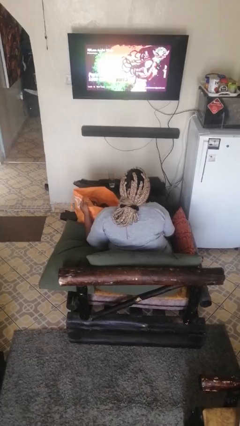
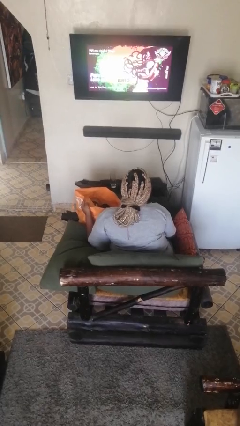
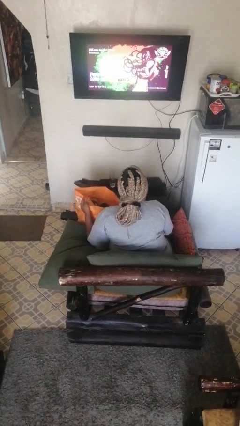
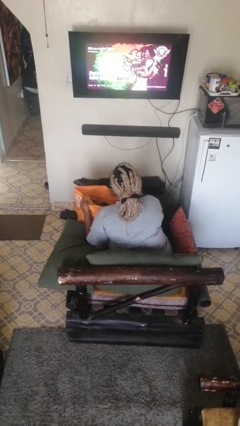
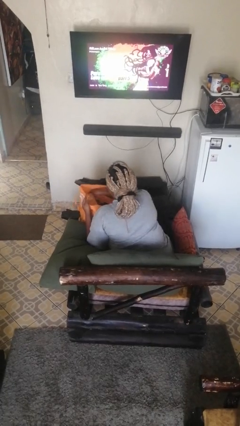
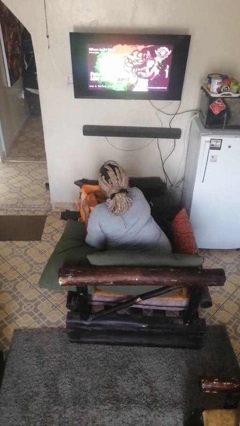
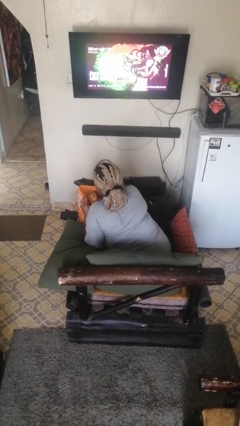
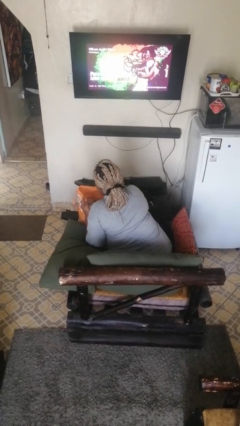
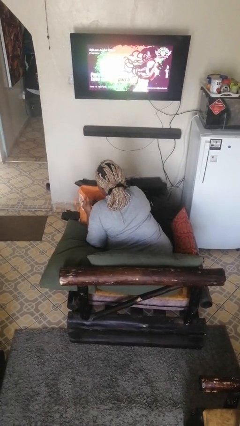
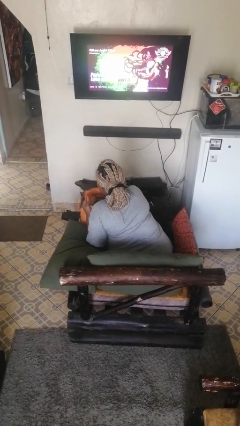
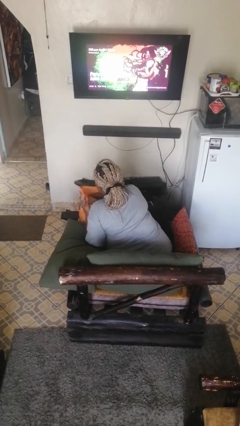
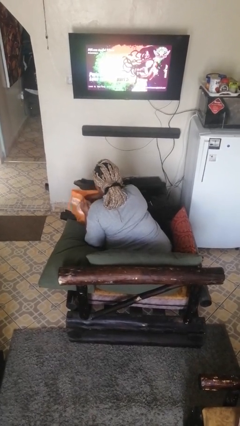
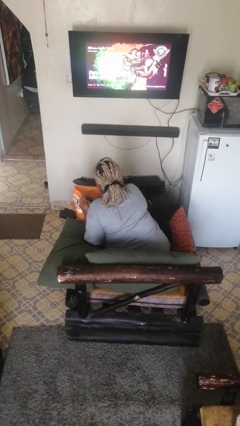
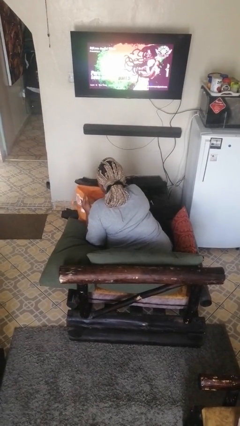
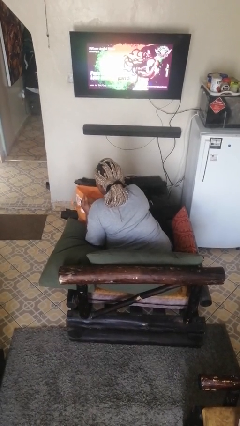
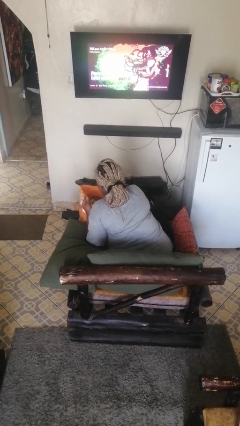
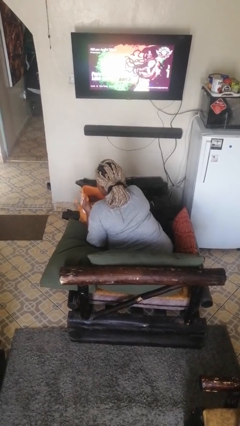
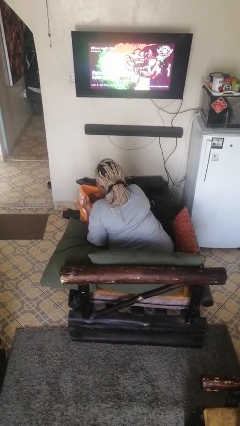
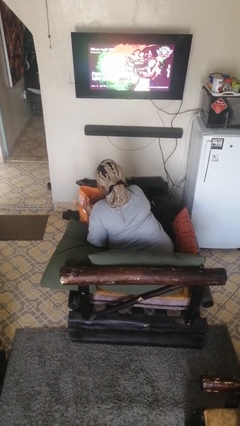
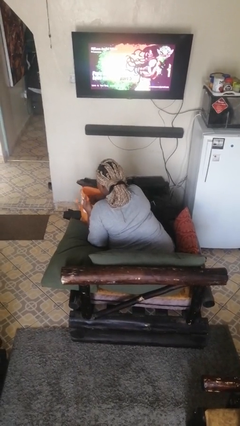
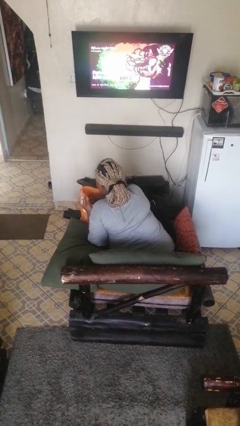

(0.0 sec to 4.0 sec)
person searches in bag

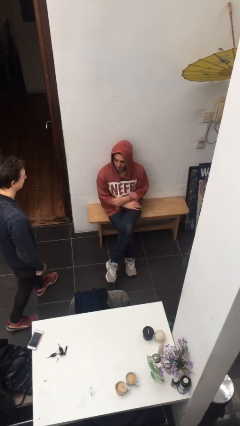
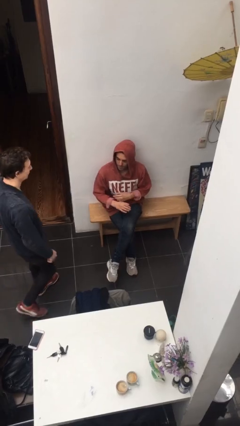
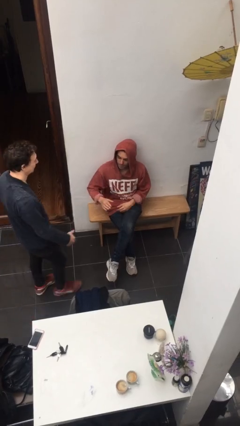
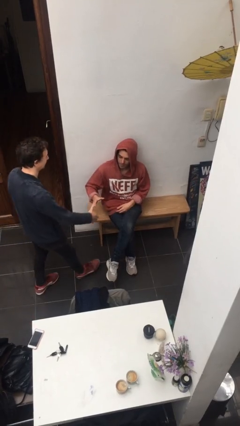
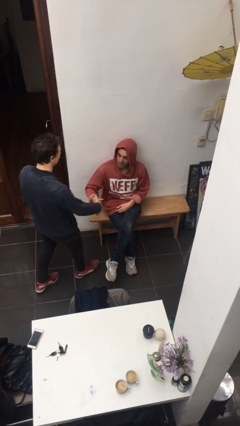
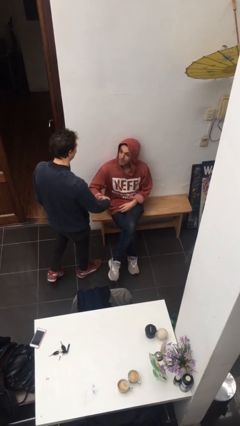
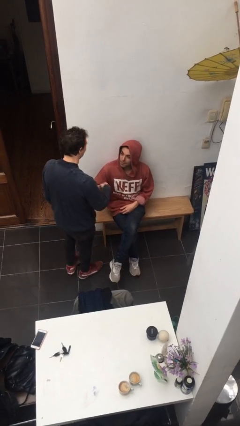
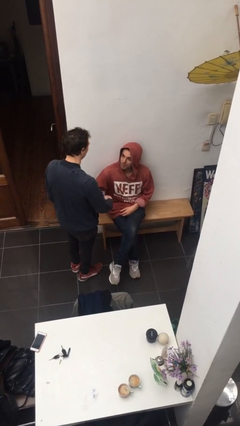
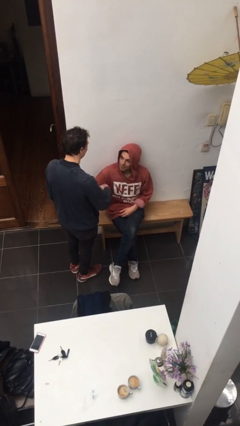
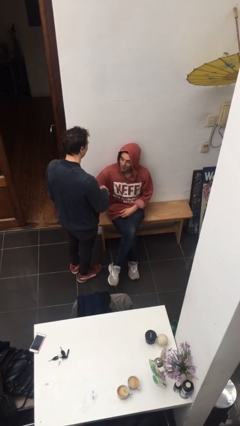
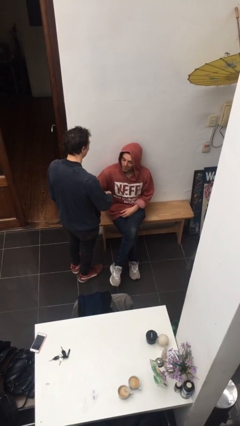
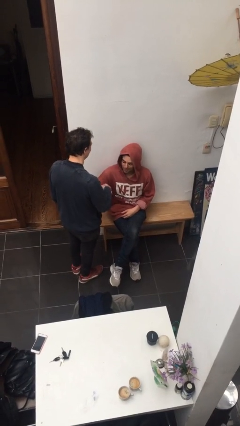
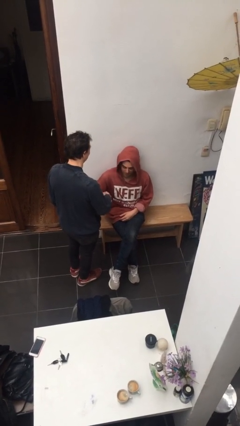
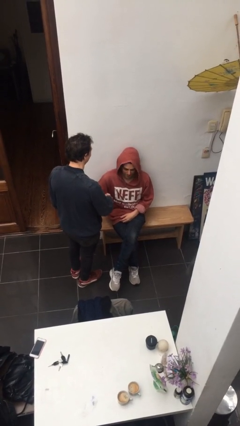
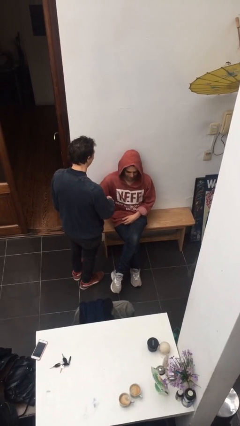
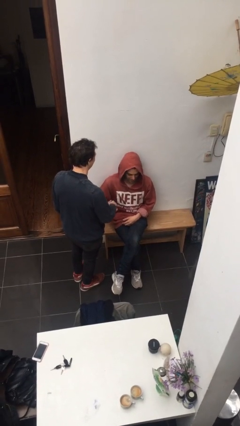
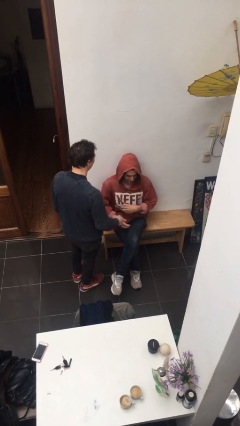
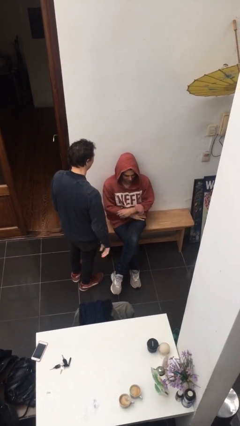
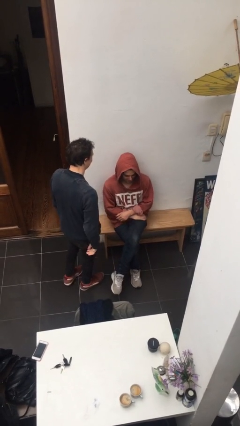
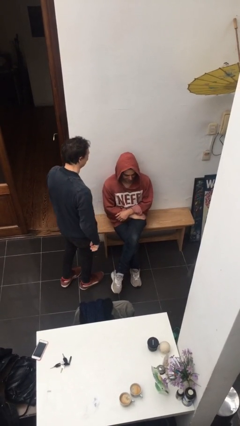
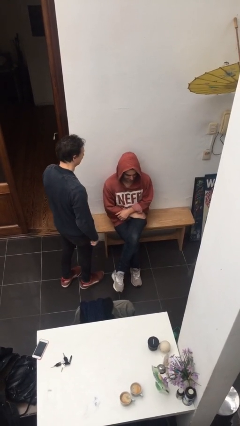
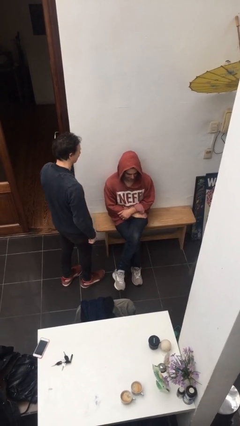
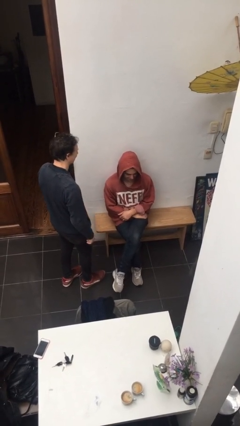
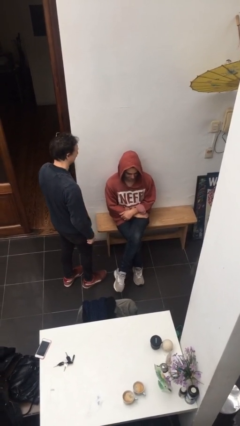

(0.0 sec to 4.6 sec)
person shakes hand

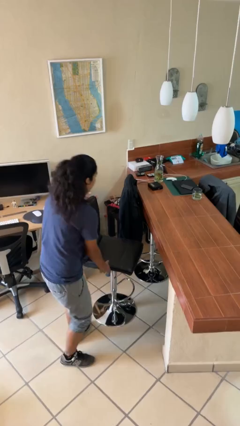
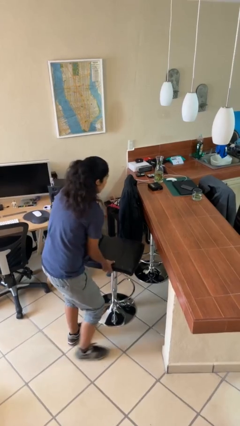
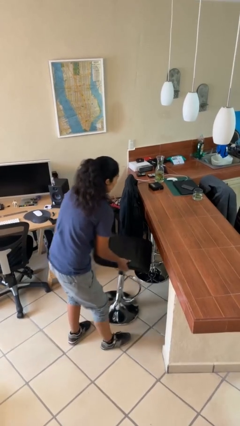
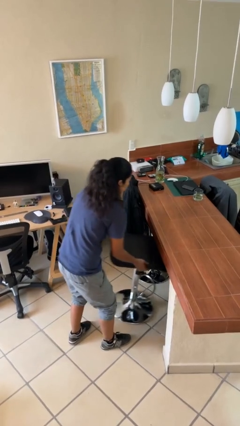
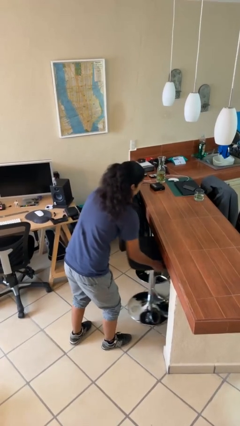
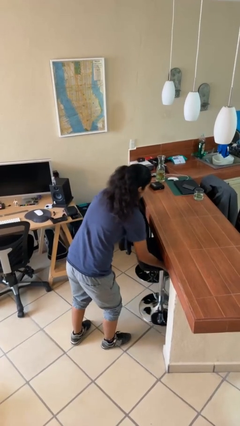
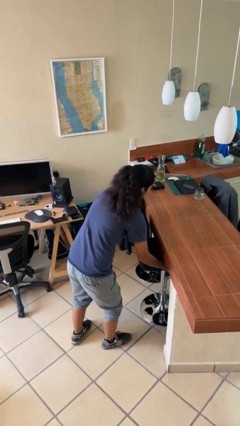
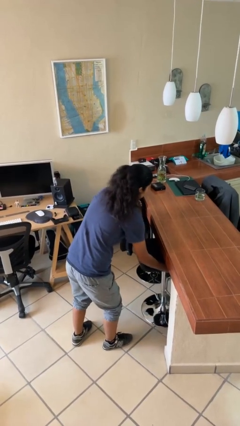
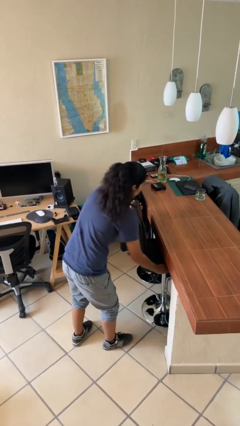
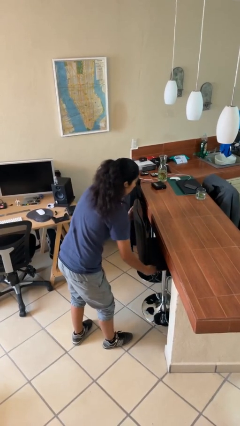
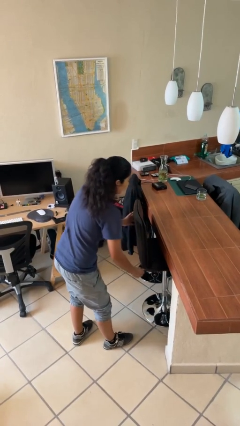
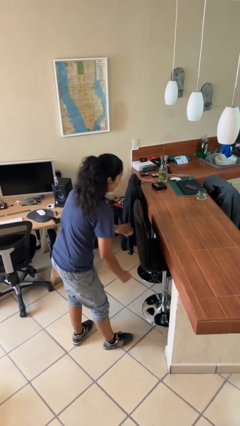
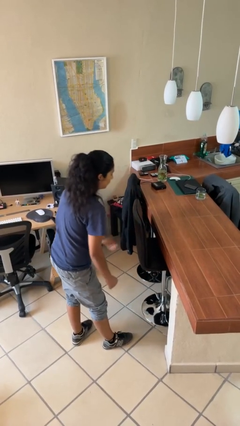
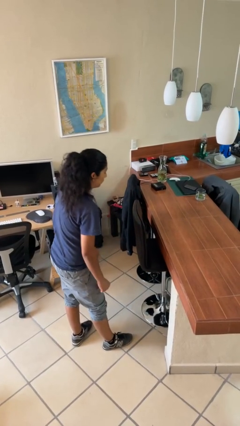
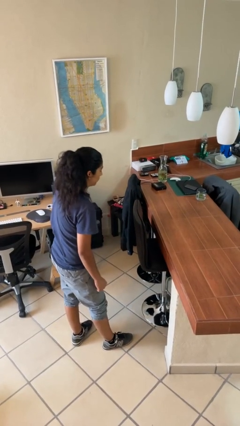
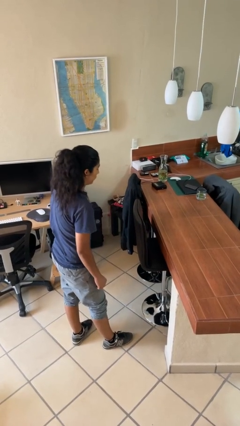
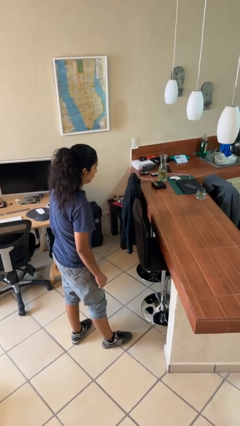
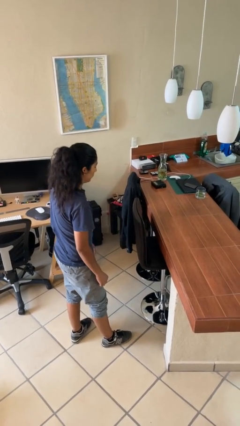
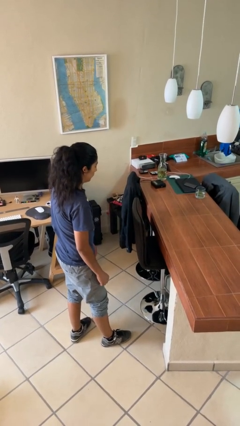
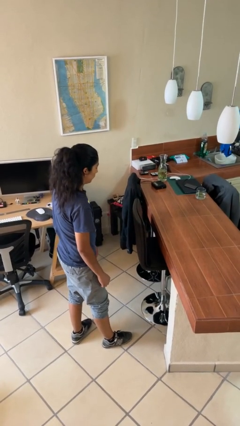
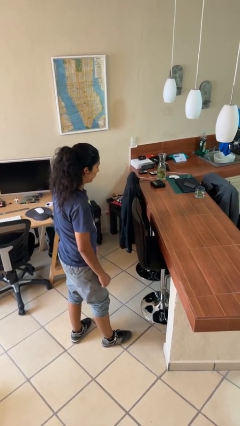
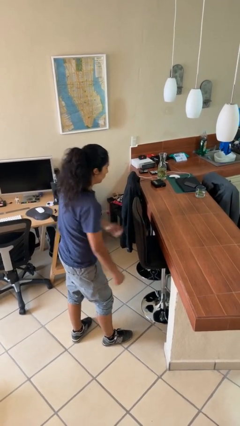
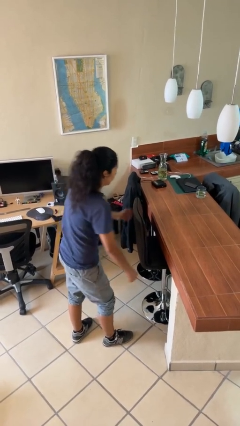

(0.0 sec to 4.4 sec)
person pushes in chair

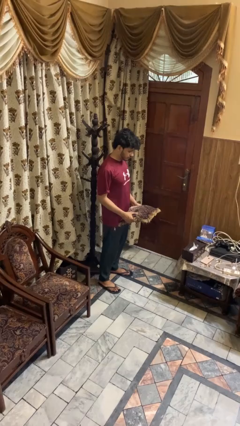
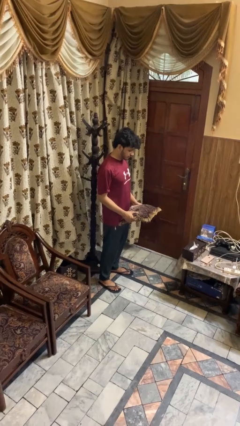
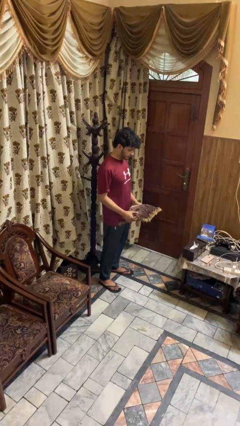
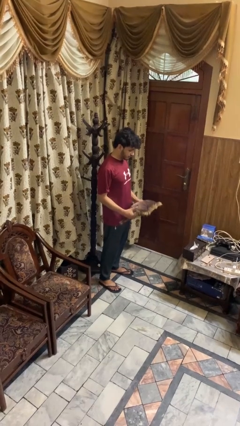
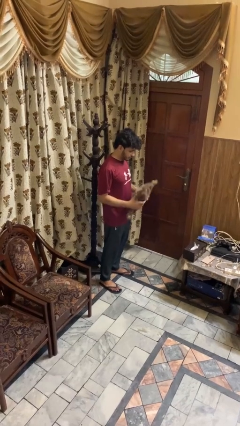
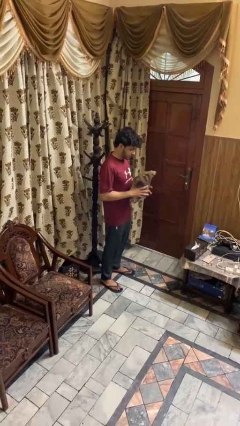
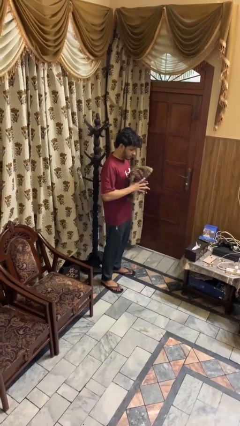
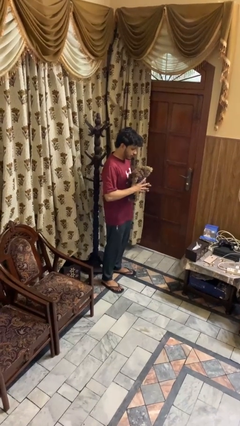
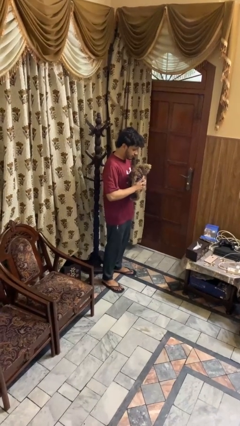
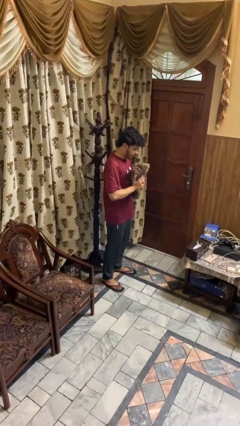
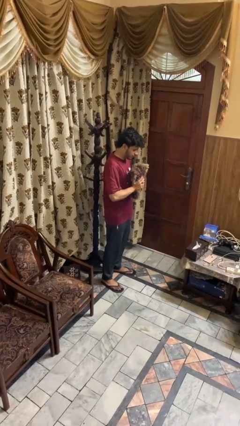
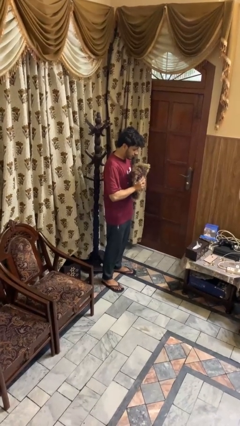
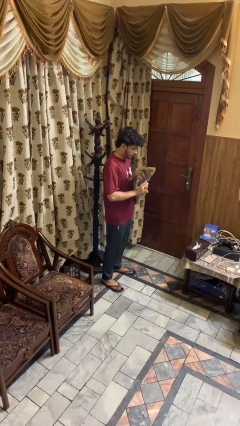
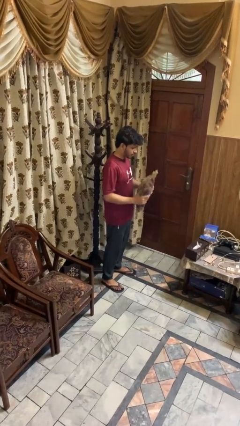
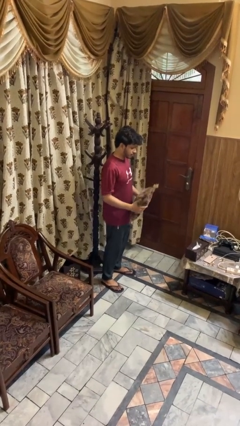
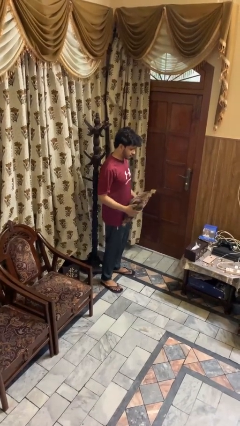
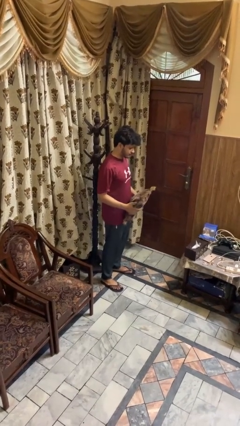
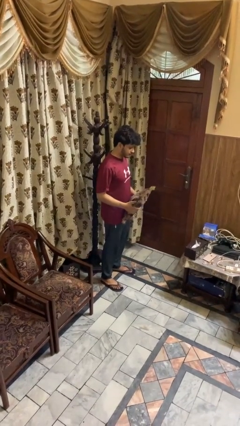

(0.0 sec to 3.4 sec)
person squeezes object

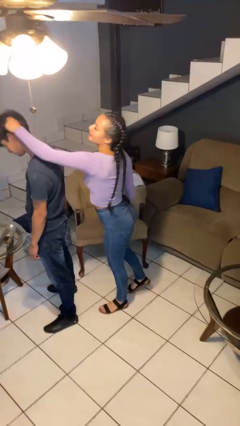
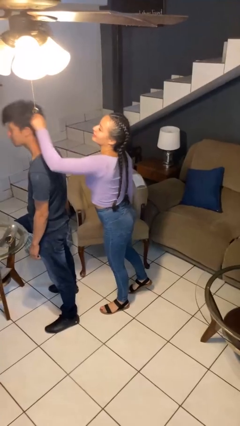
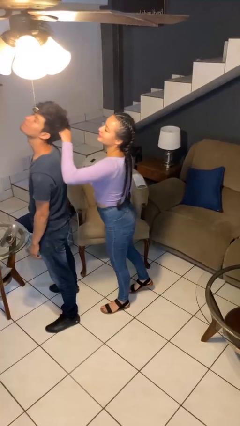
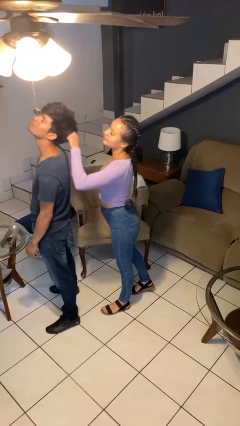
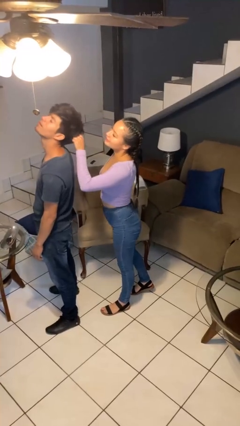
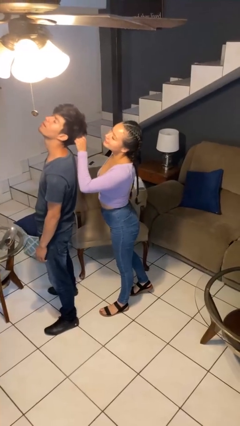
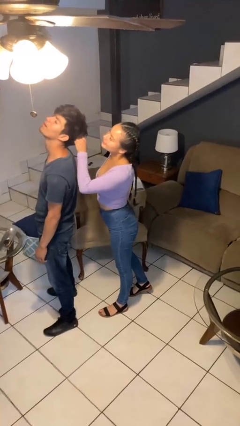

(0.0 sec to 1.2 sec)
person grabs person by hair

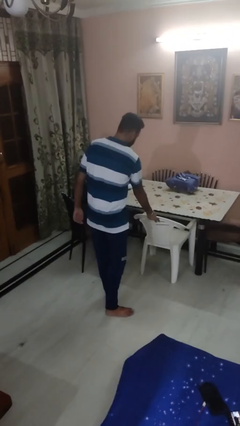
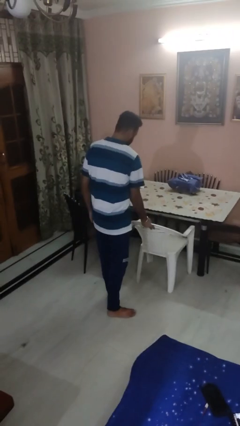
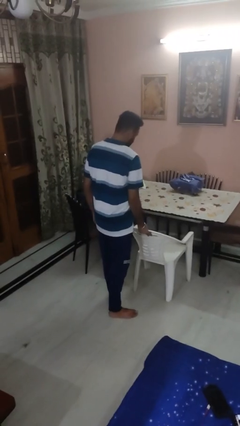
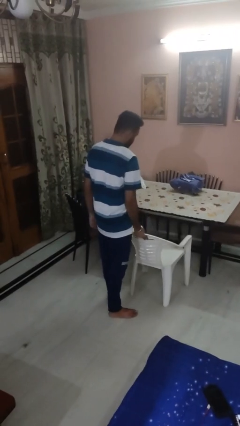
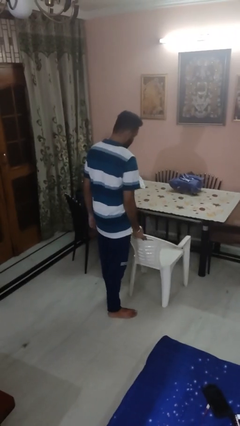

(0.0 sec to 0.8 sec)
person pulls out chair
